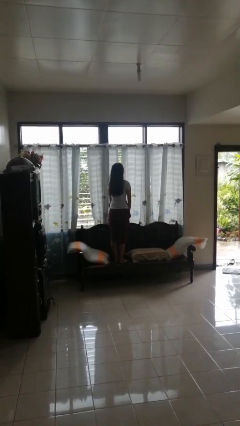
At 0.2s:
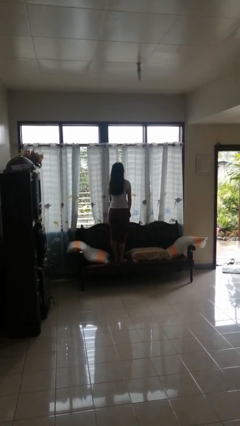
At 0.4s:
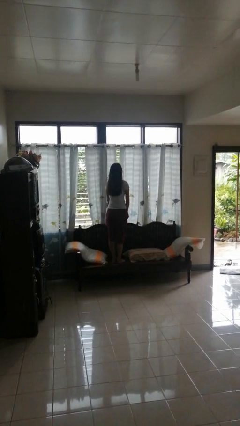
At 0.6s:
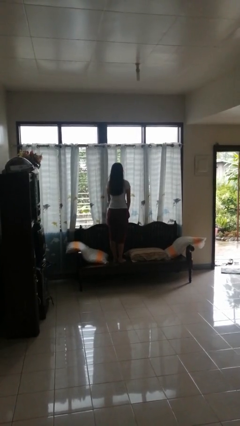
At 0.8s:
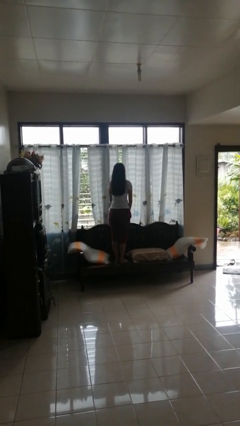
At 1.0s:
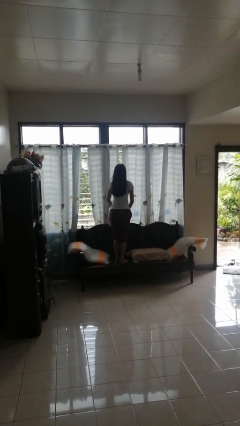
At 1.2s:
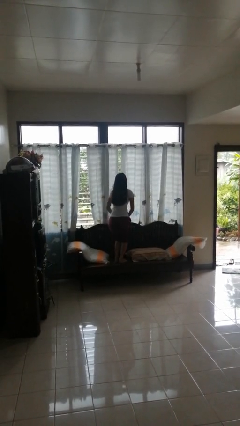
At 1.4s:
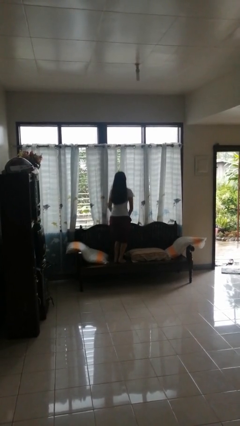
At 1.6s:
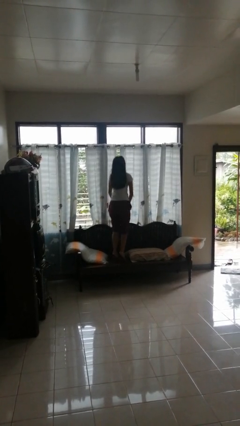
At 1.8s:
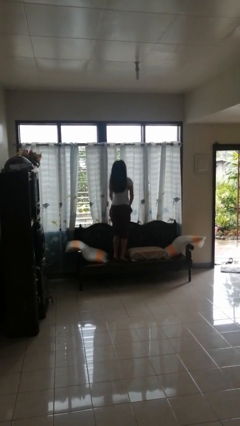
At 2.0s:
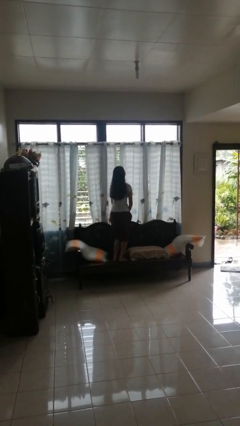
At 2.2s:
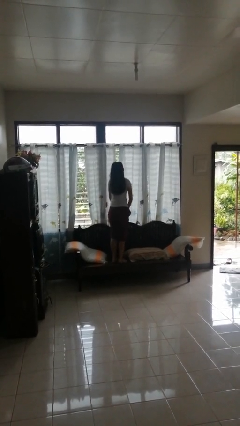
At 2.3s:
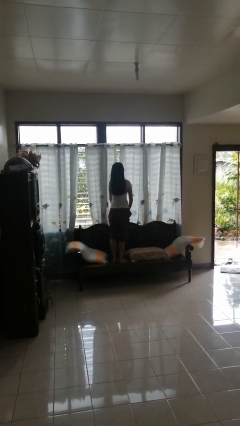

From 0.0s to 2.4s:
person jumps on couch

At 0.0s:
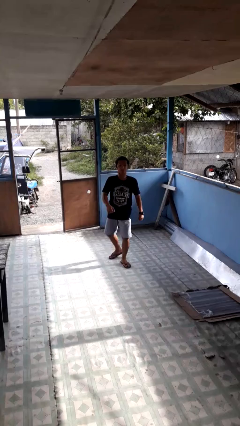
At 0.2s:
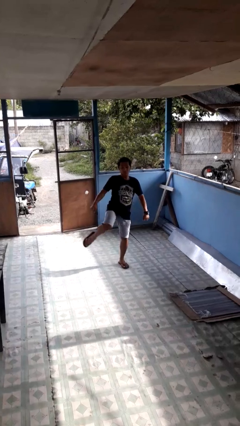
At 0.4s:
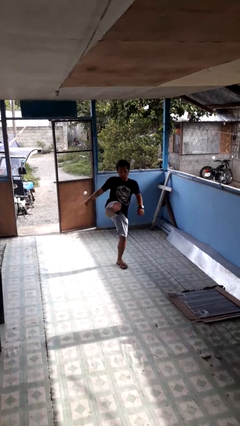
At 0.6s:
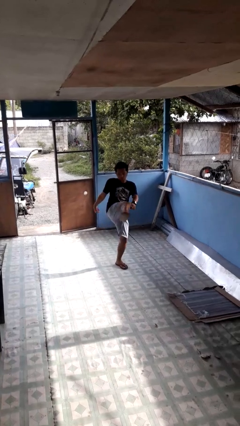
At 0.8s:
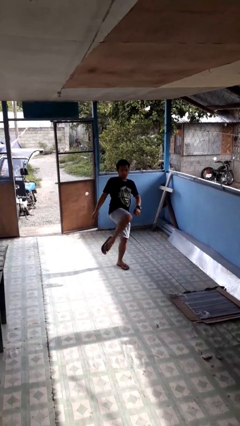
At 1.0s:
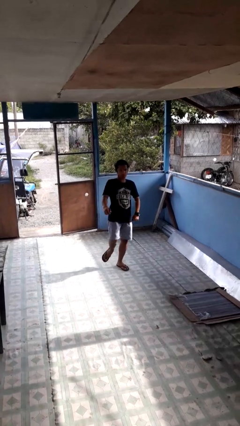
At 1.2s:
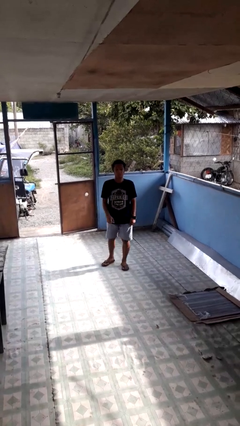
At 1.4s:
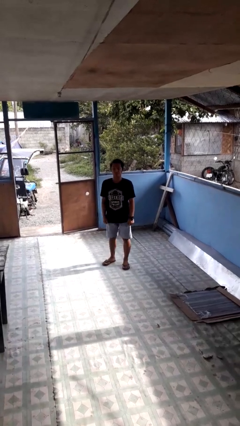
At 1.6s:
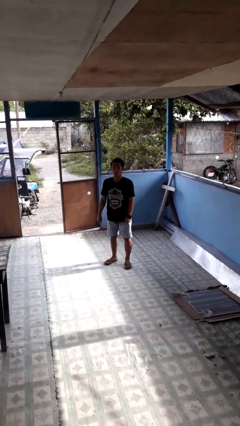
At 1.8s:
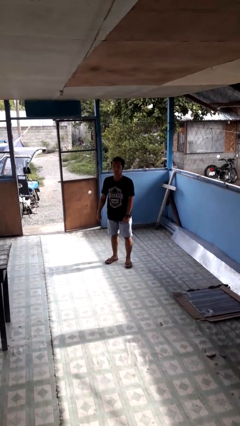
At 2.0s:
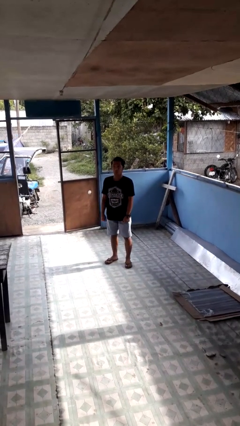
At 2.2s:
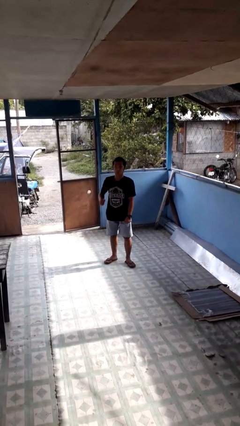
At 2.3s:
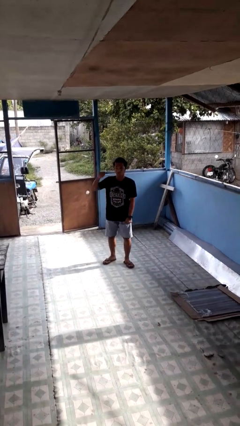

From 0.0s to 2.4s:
person karate kicks

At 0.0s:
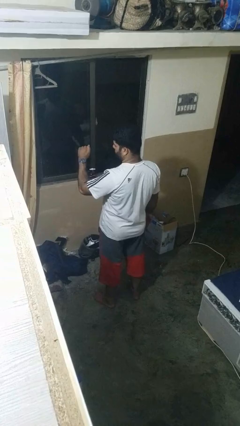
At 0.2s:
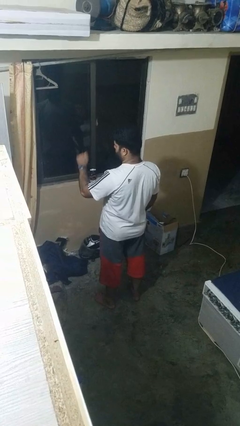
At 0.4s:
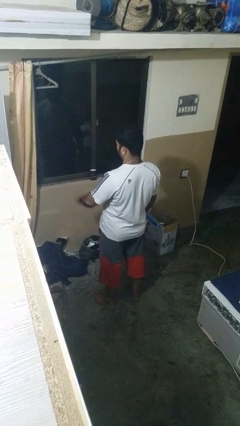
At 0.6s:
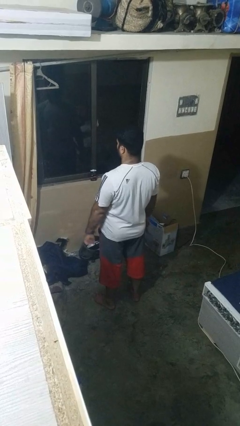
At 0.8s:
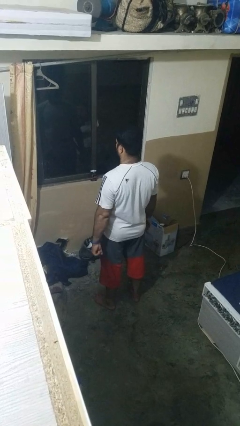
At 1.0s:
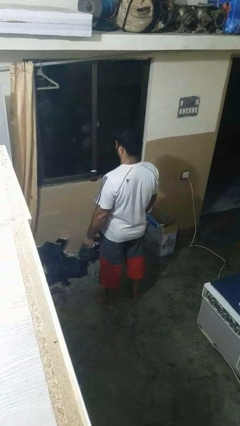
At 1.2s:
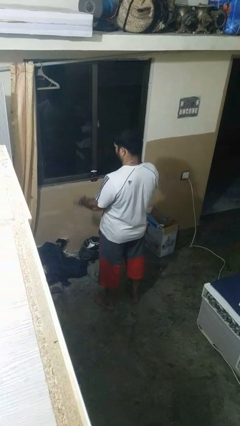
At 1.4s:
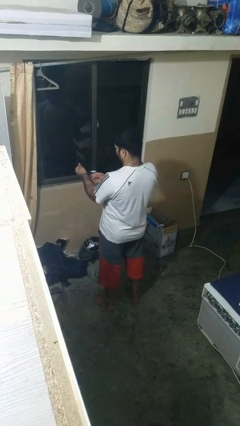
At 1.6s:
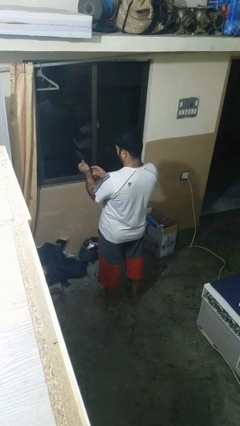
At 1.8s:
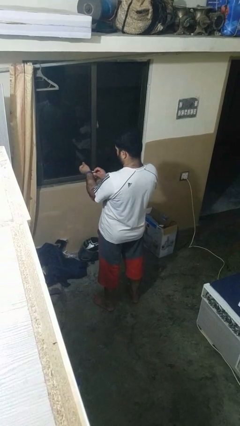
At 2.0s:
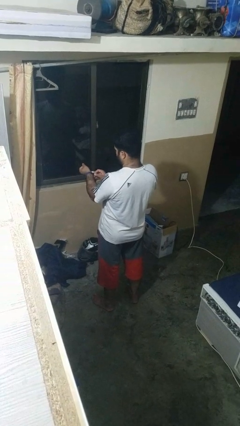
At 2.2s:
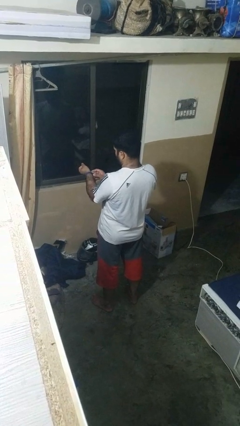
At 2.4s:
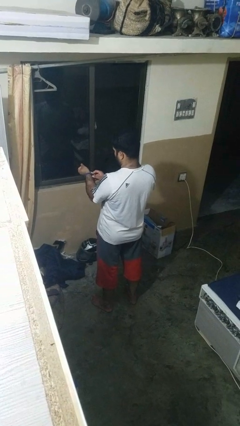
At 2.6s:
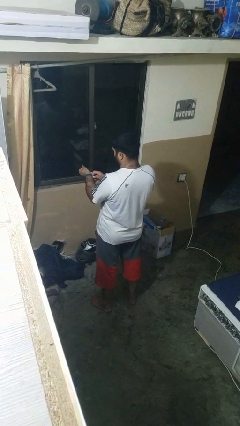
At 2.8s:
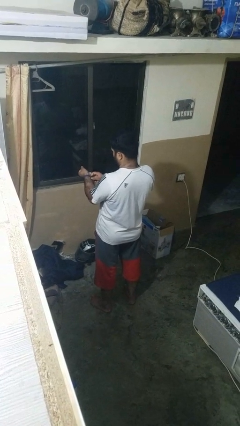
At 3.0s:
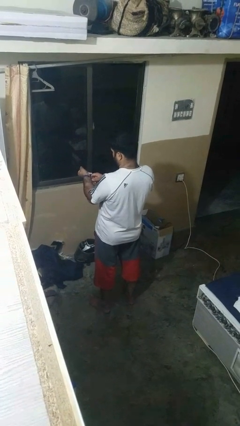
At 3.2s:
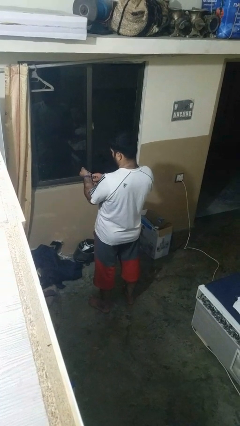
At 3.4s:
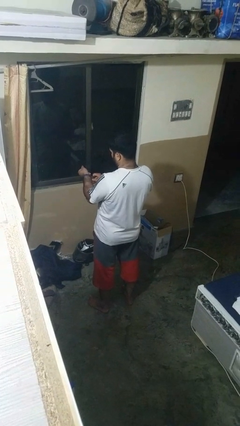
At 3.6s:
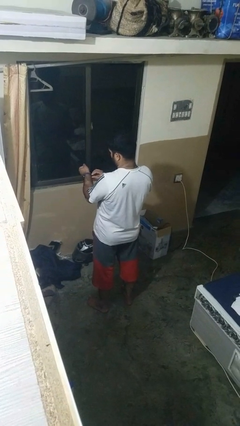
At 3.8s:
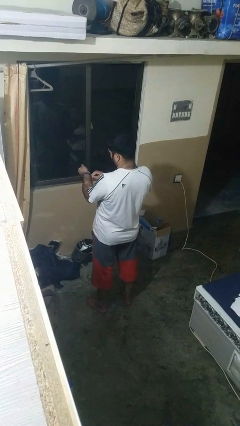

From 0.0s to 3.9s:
person takes off wristwatch

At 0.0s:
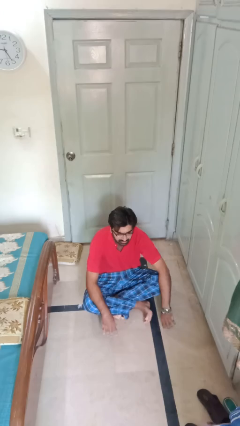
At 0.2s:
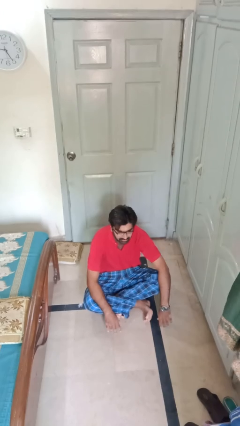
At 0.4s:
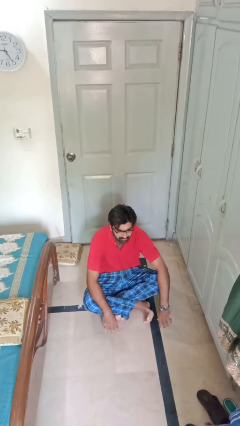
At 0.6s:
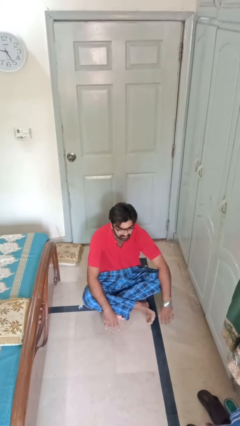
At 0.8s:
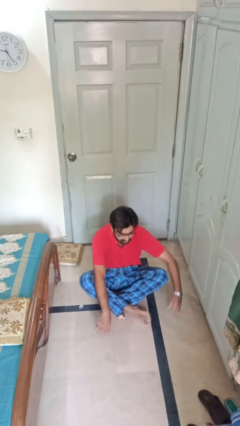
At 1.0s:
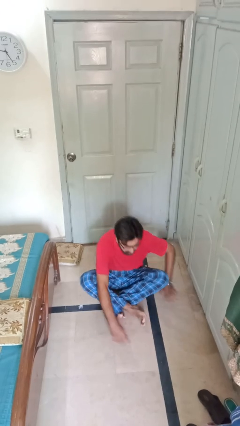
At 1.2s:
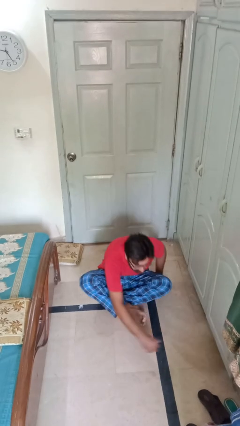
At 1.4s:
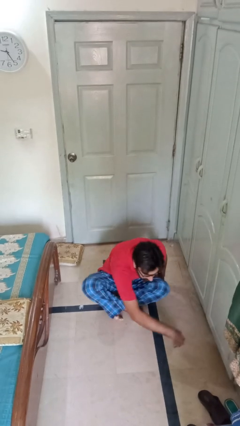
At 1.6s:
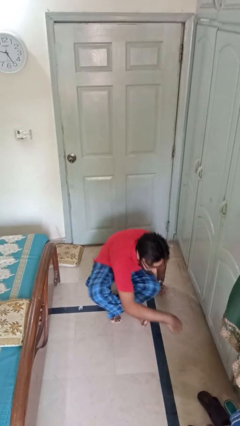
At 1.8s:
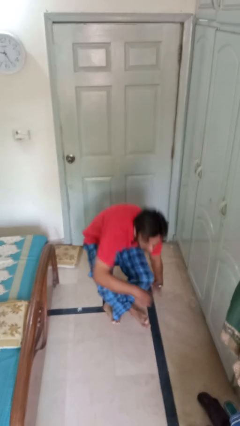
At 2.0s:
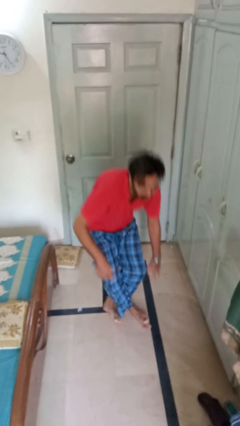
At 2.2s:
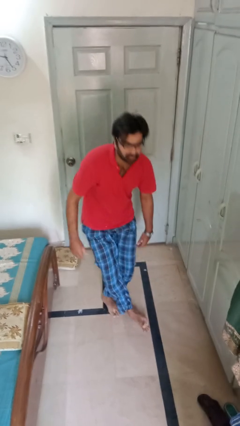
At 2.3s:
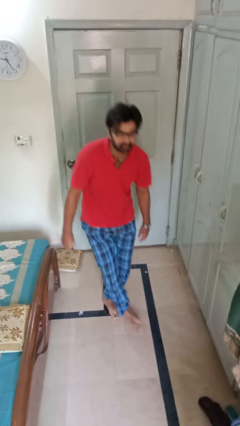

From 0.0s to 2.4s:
person stands up from floor

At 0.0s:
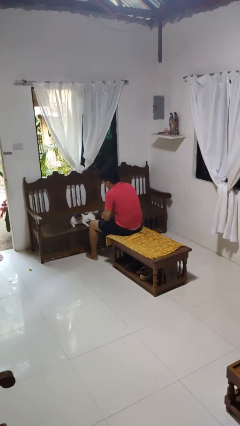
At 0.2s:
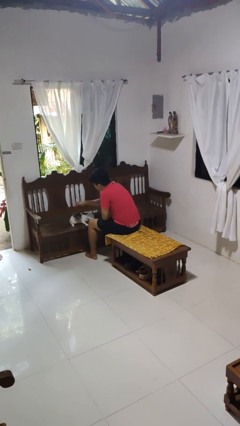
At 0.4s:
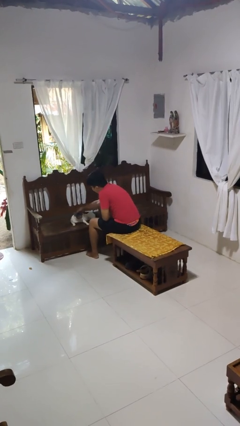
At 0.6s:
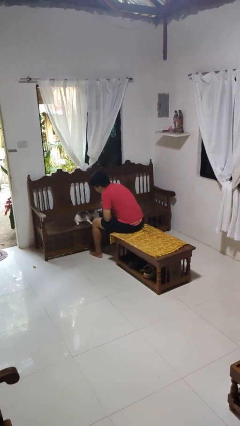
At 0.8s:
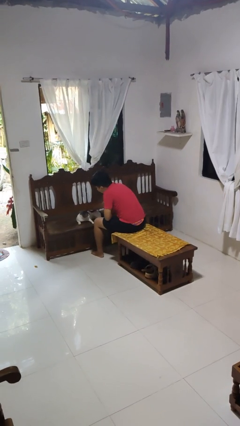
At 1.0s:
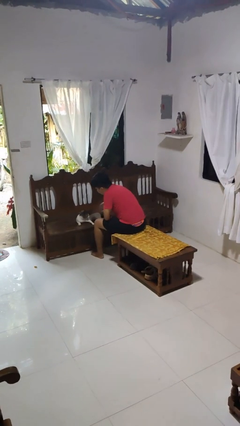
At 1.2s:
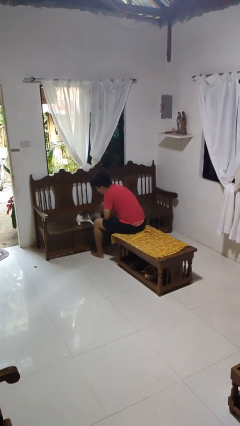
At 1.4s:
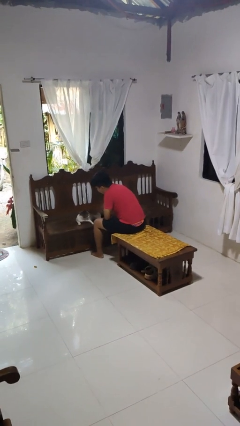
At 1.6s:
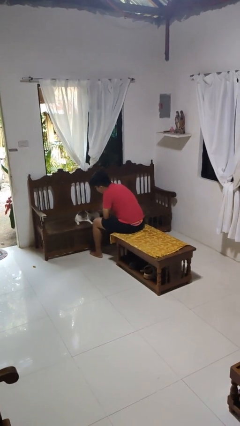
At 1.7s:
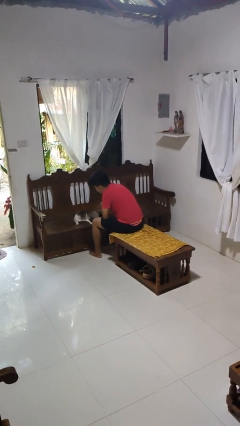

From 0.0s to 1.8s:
person pets cat

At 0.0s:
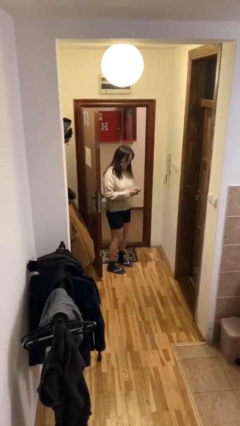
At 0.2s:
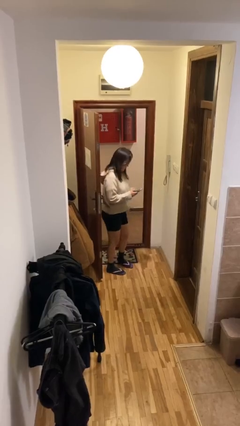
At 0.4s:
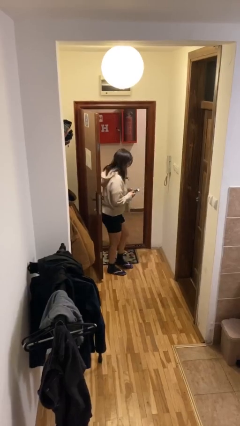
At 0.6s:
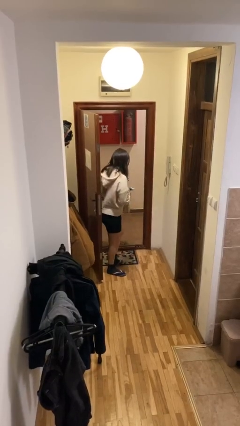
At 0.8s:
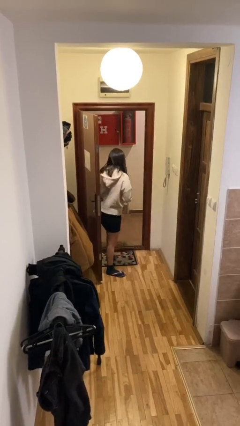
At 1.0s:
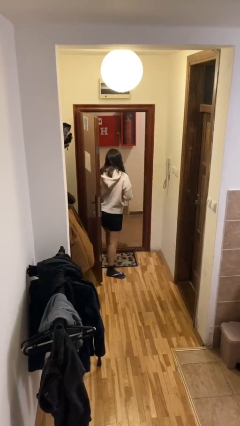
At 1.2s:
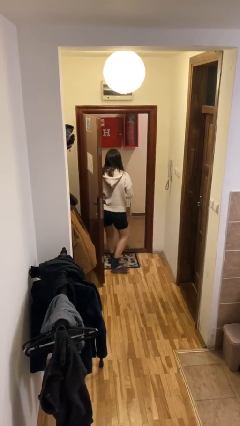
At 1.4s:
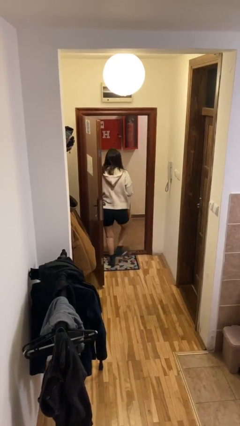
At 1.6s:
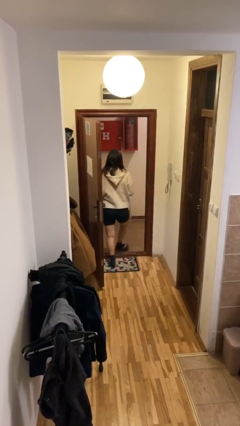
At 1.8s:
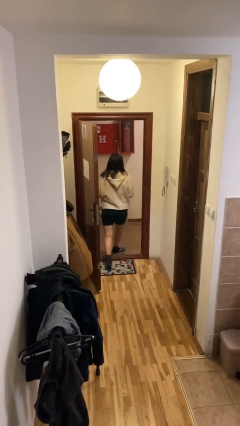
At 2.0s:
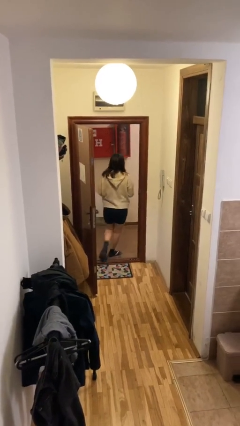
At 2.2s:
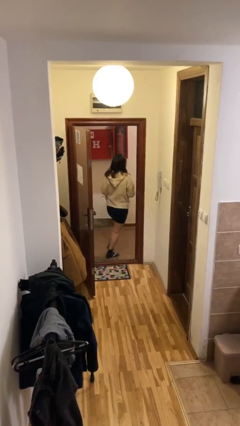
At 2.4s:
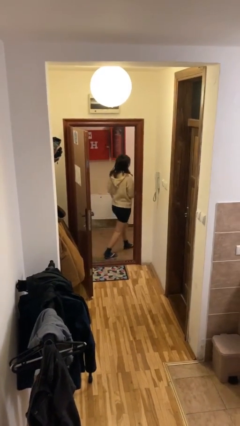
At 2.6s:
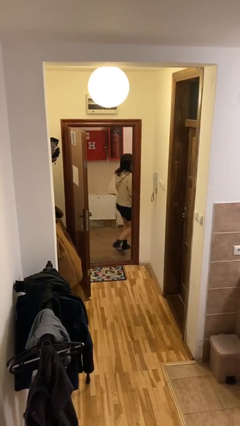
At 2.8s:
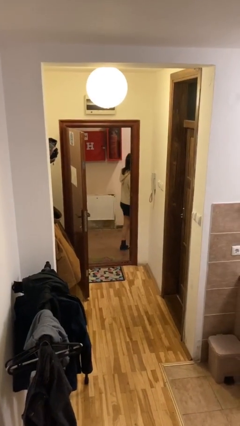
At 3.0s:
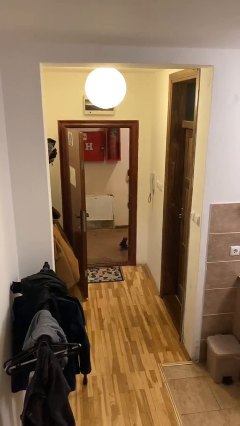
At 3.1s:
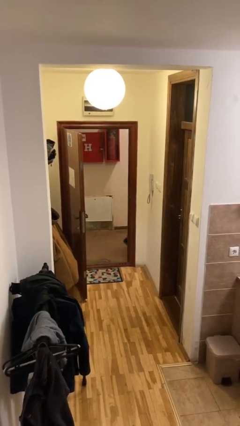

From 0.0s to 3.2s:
person exits scene through structure

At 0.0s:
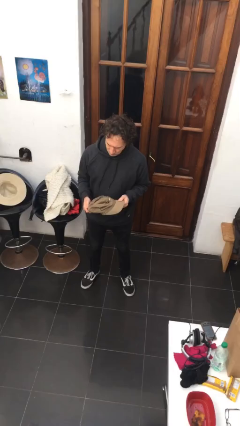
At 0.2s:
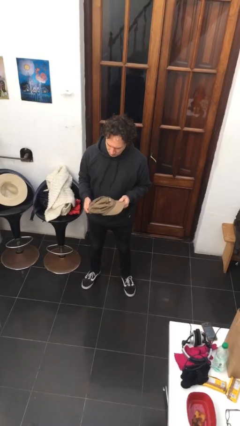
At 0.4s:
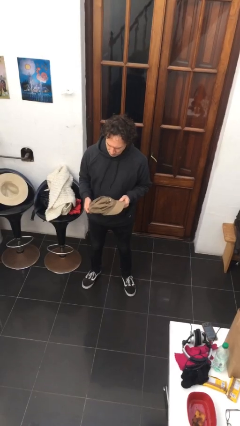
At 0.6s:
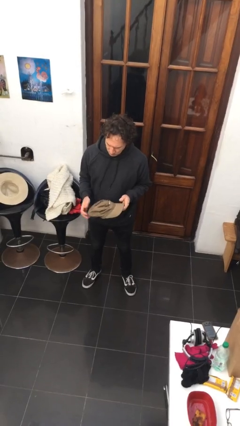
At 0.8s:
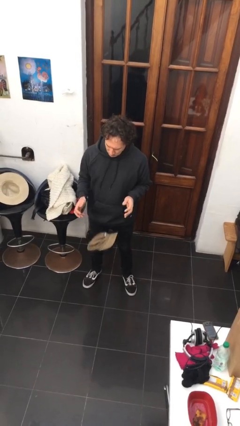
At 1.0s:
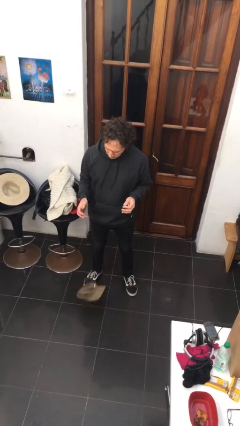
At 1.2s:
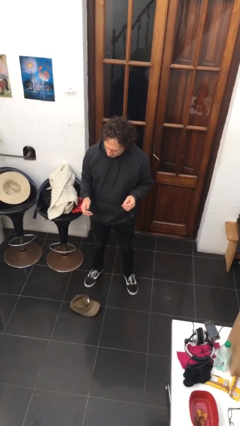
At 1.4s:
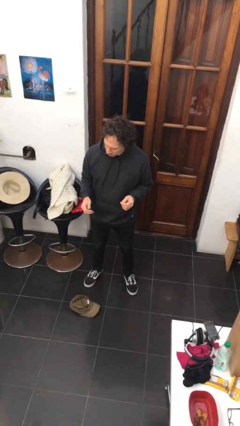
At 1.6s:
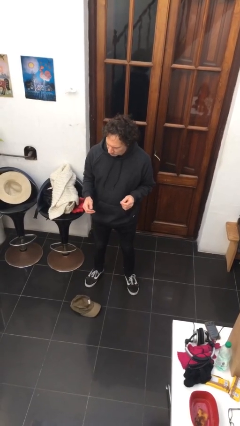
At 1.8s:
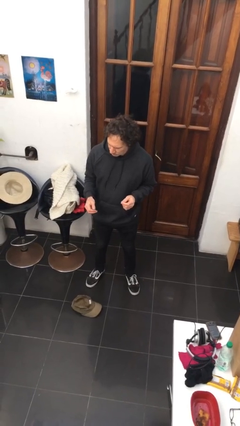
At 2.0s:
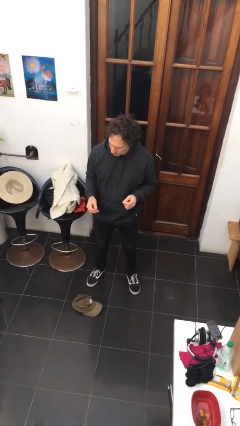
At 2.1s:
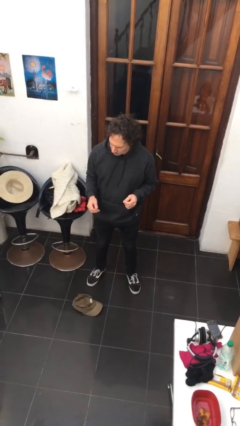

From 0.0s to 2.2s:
person drops object
